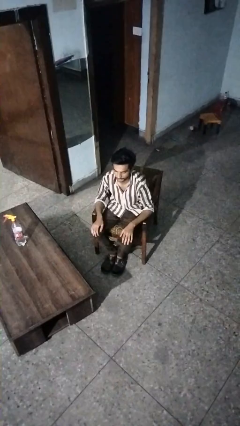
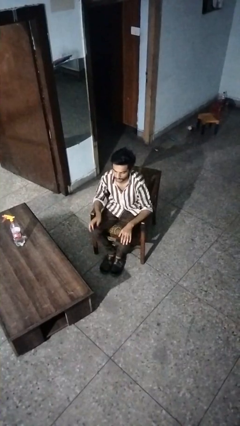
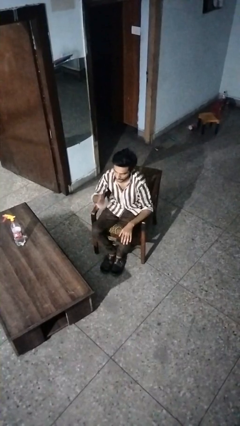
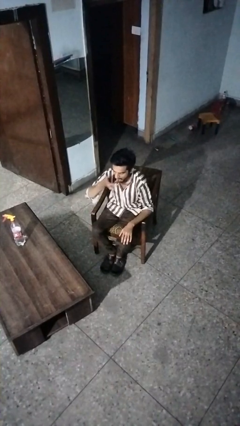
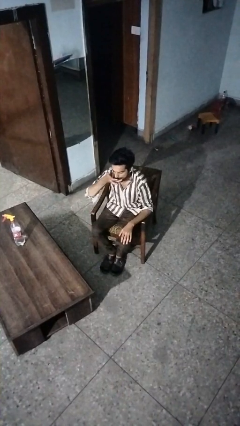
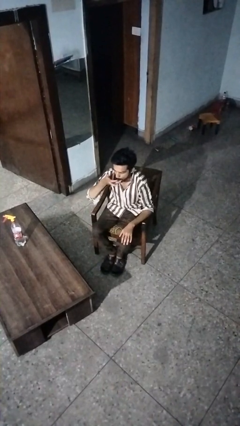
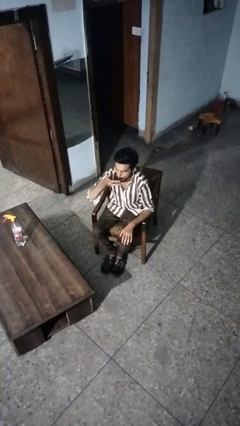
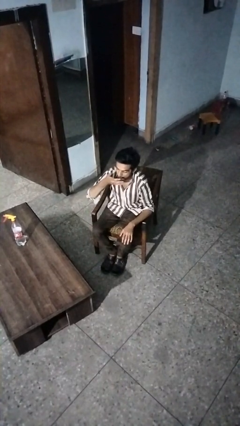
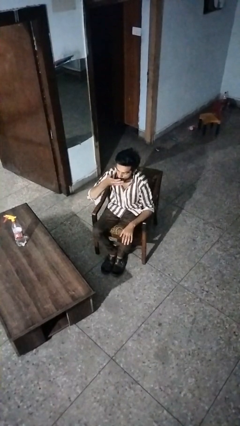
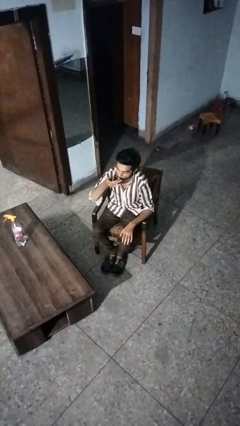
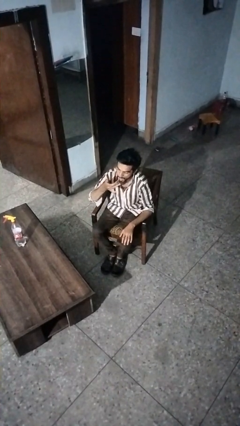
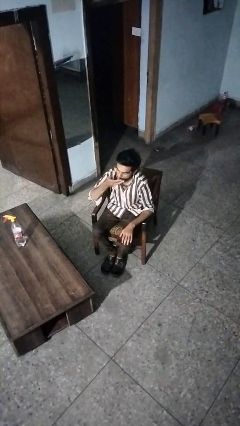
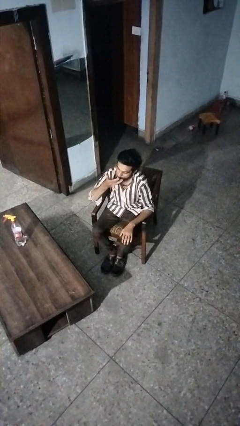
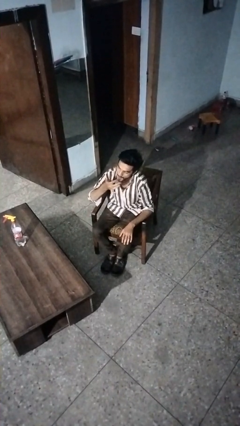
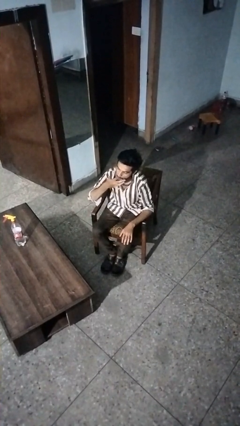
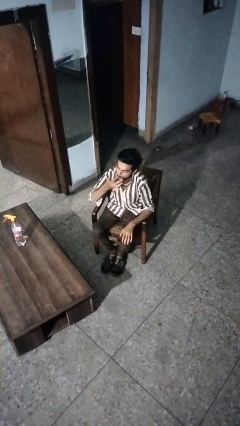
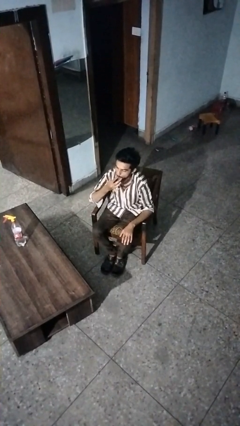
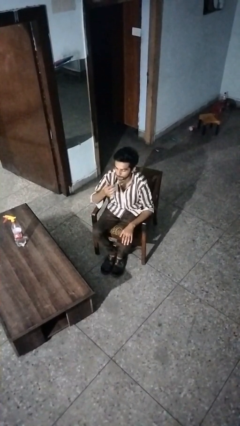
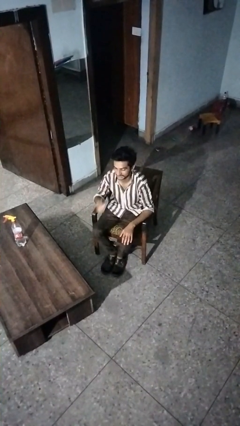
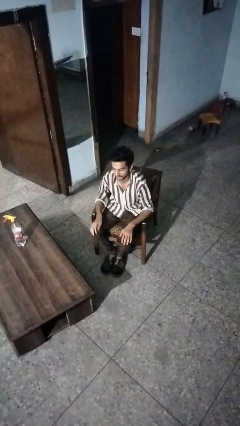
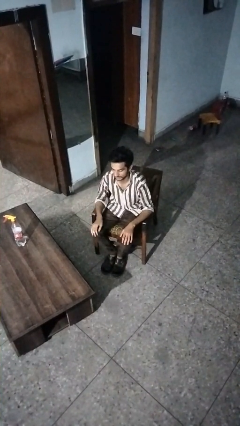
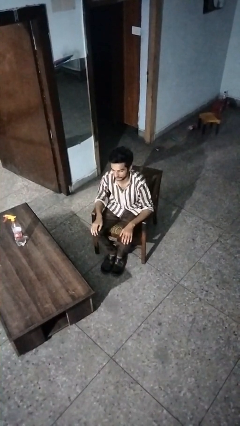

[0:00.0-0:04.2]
person licks fingers

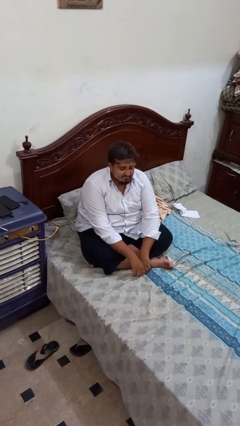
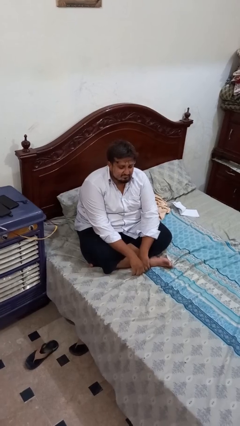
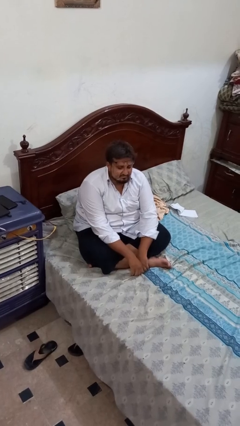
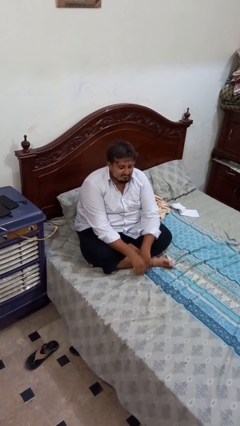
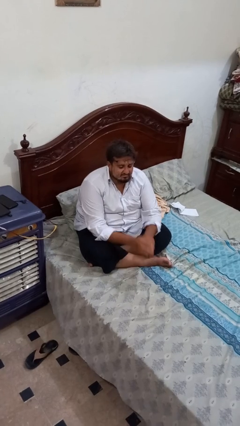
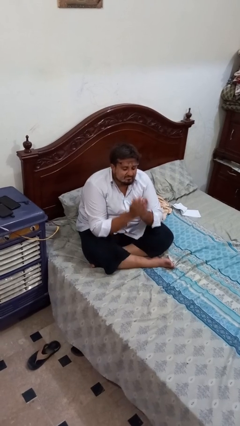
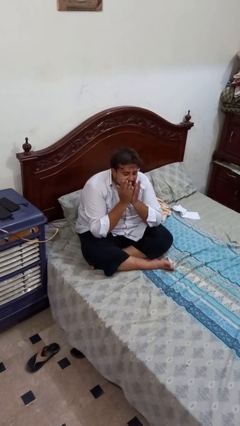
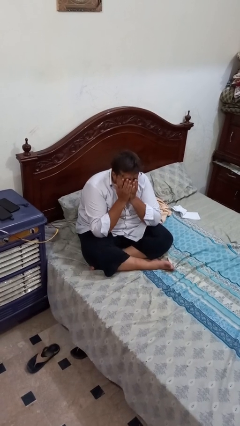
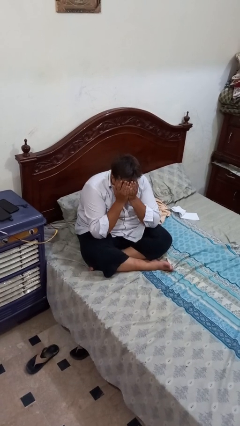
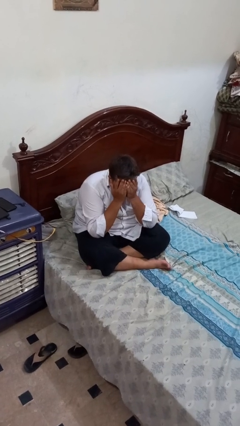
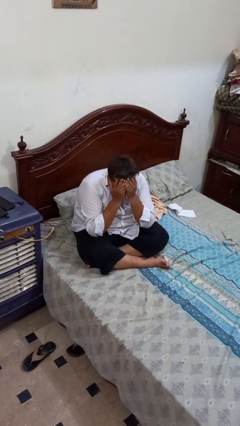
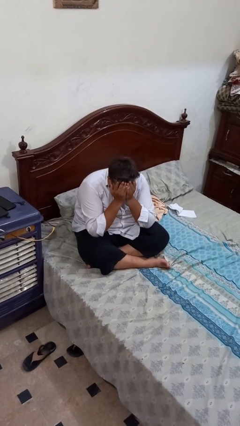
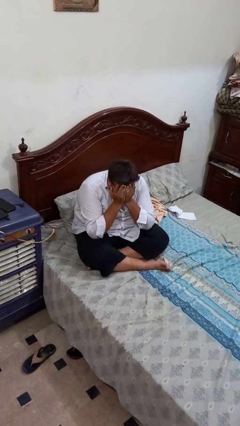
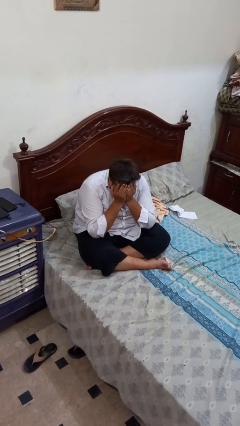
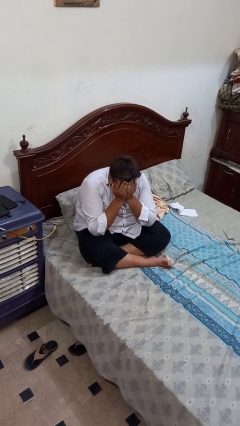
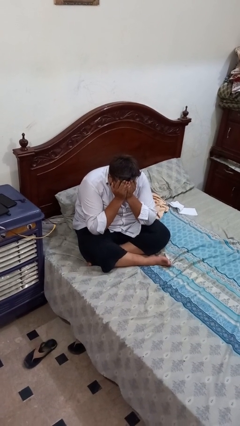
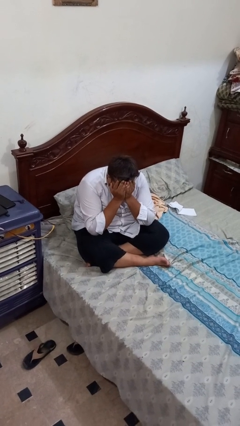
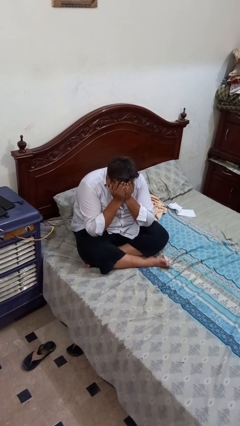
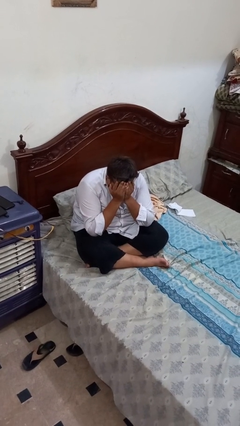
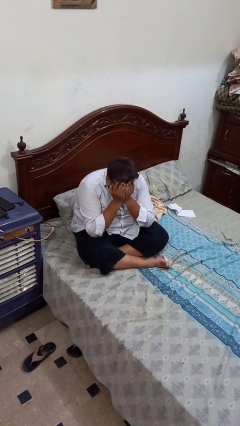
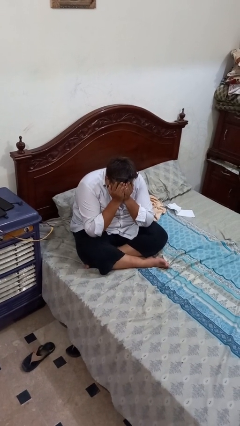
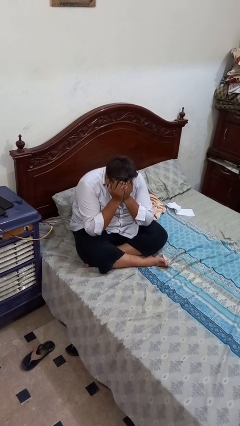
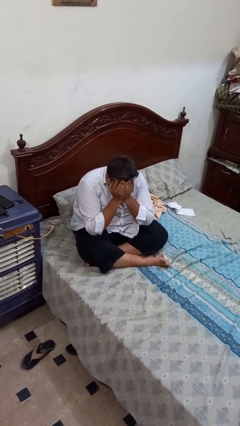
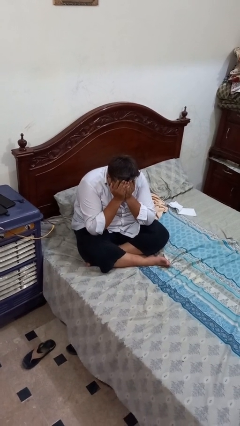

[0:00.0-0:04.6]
person covers face with hands

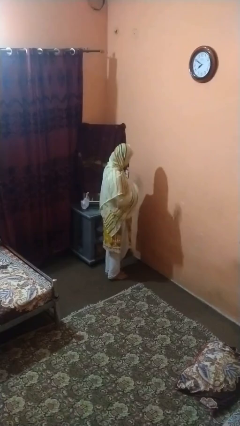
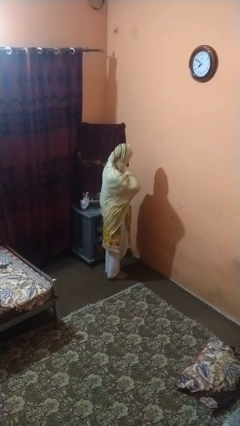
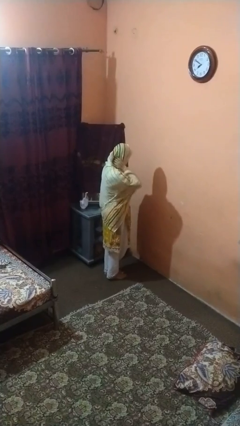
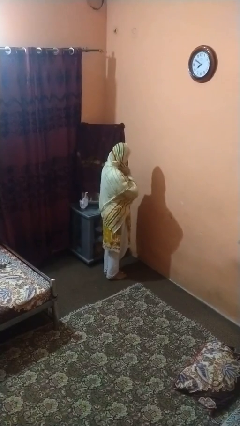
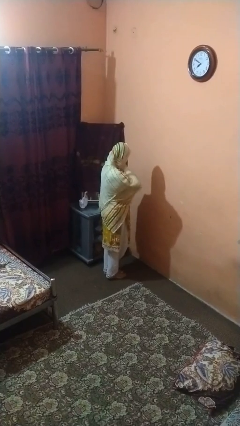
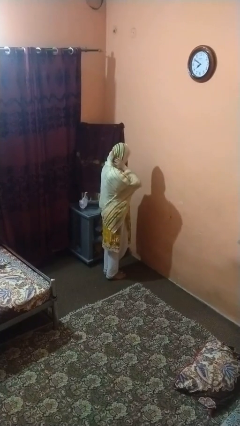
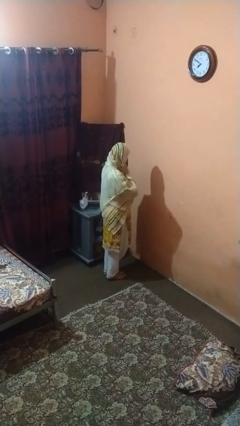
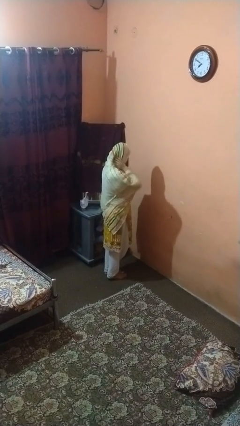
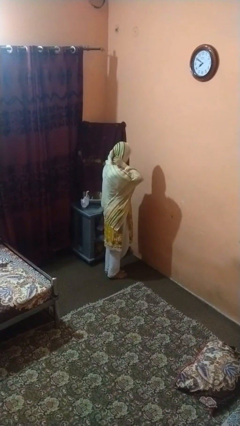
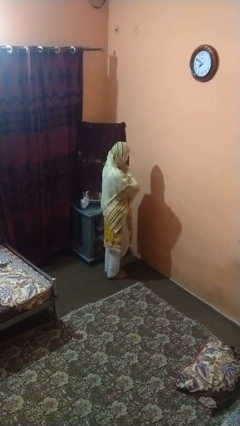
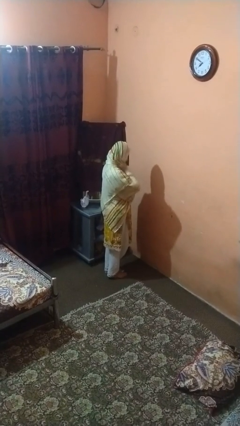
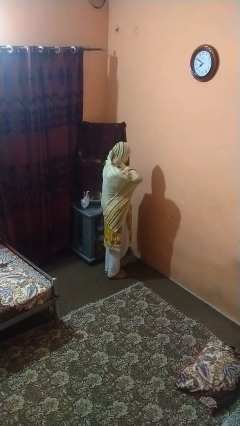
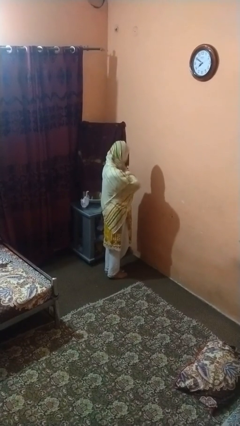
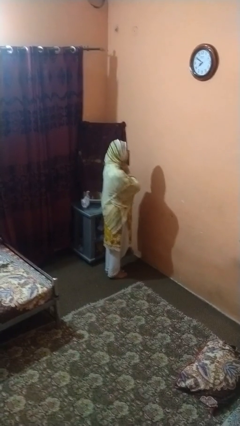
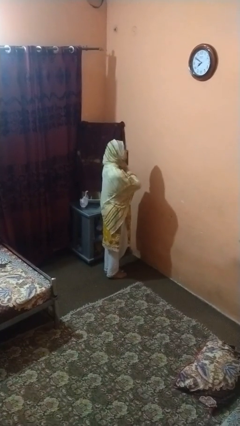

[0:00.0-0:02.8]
person rubs neck

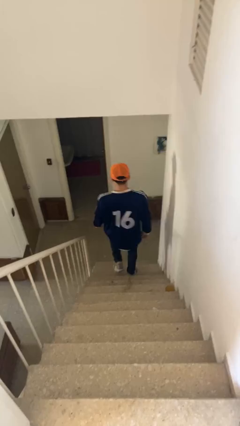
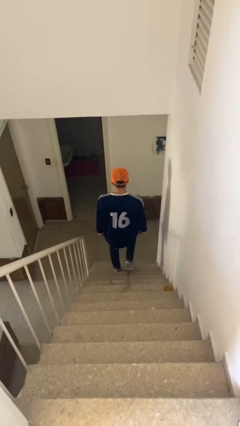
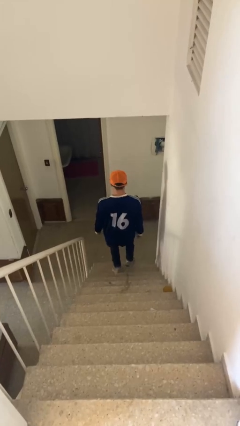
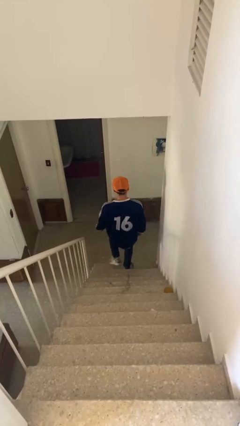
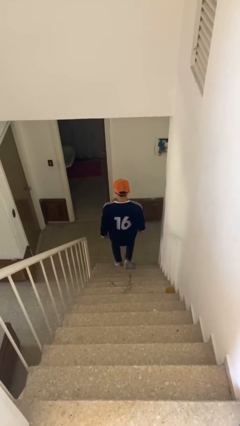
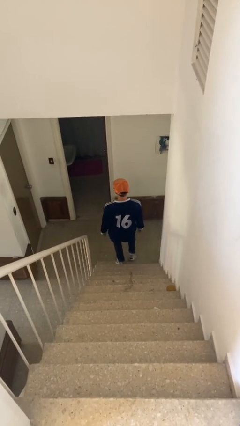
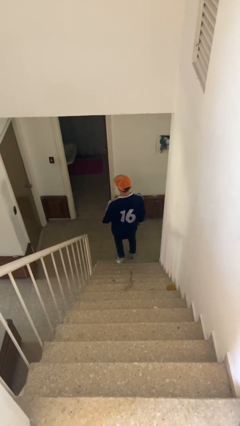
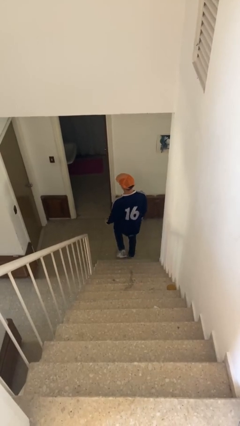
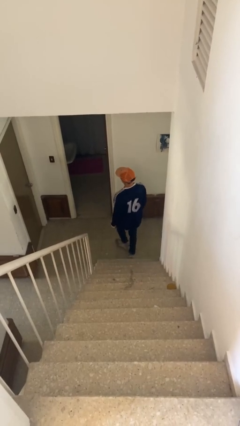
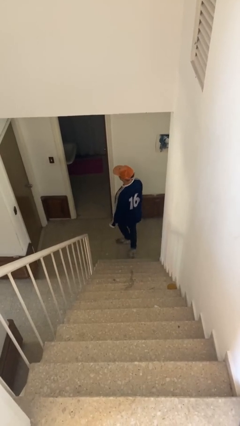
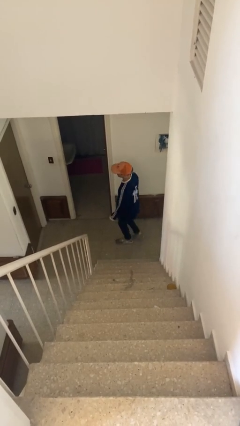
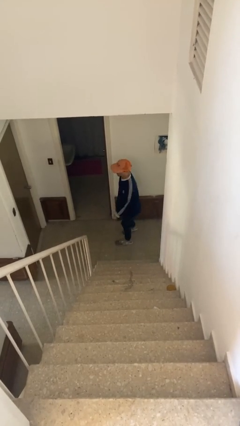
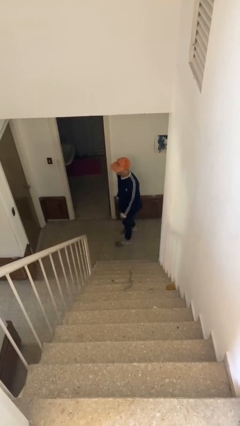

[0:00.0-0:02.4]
person climbs down stairs

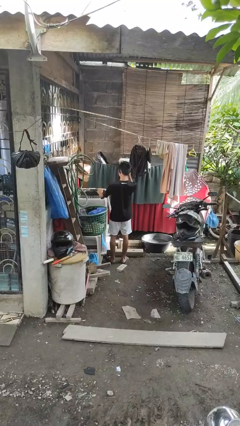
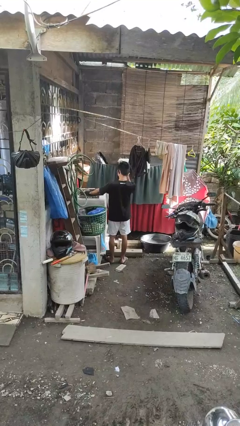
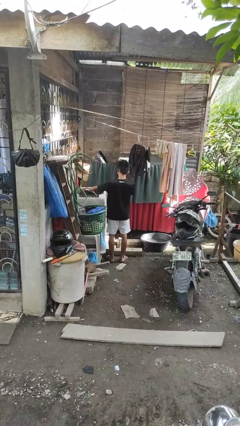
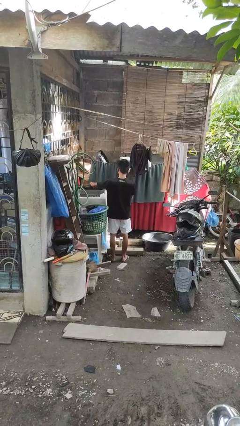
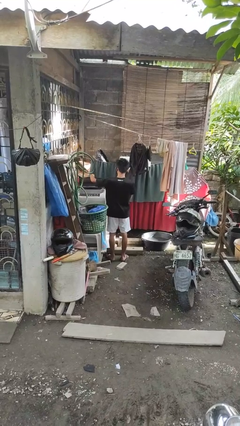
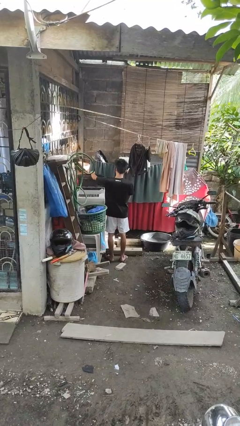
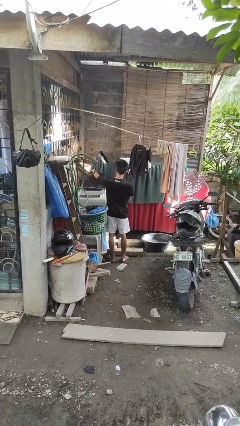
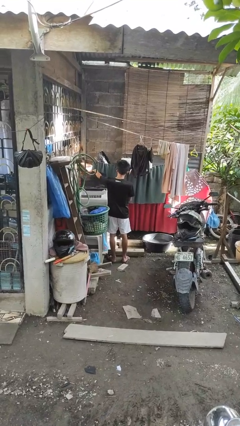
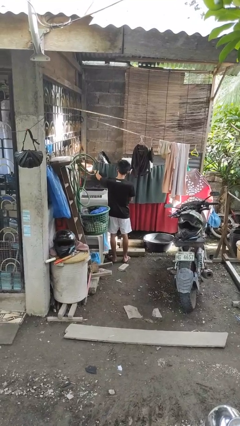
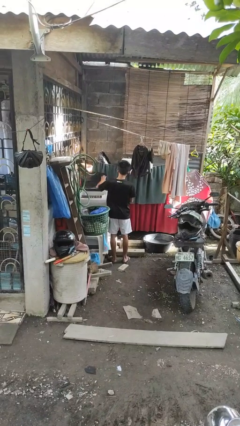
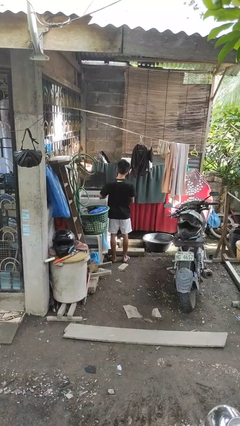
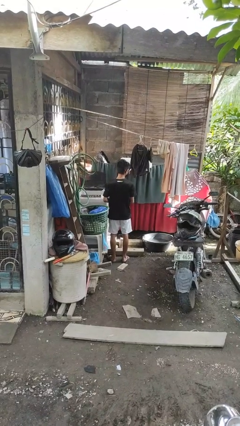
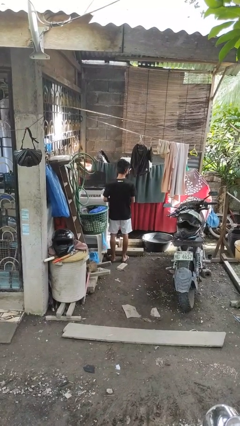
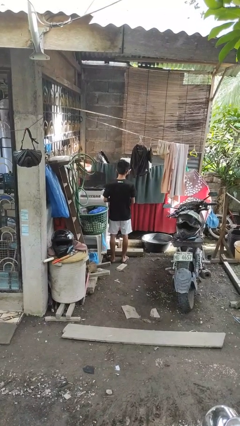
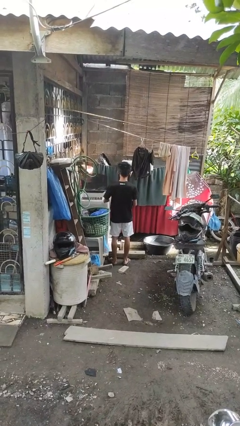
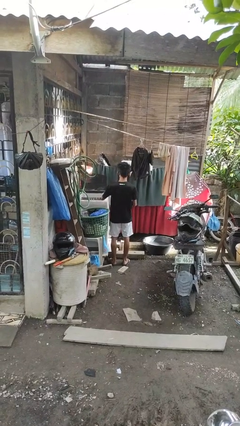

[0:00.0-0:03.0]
person opens clothes washer
